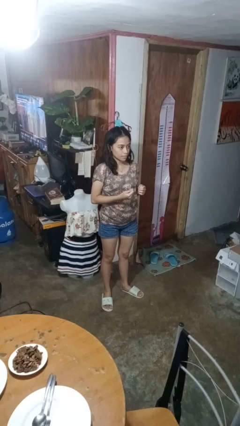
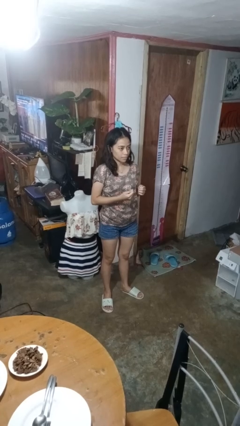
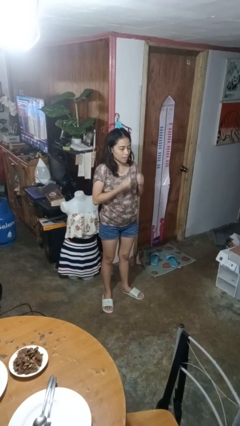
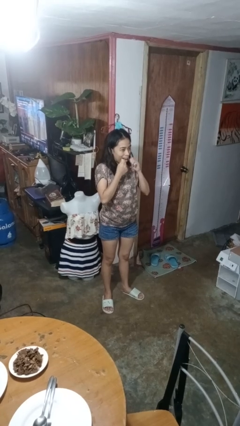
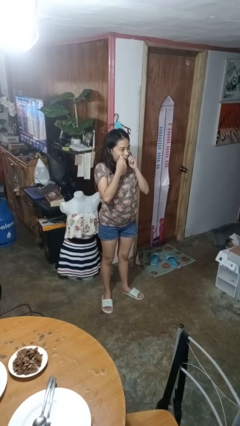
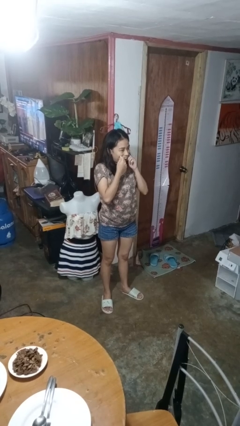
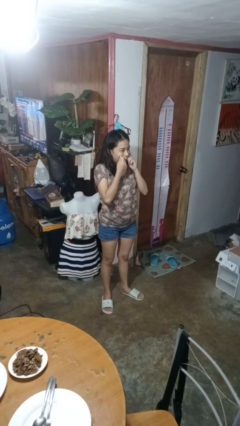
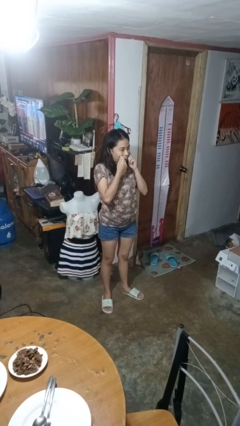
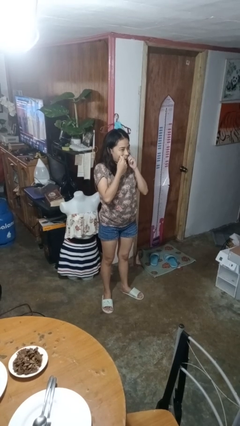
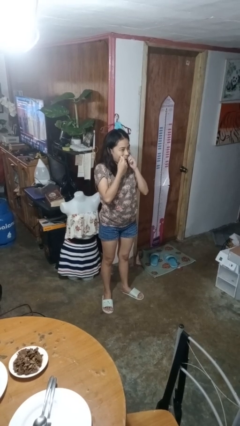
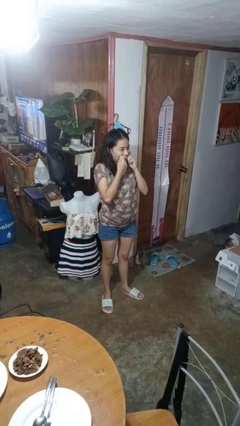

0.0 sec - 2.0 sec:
person flosses

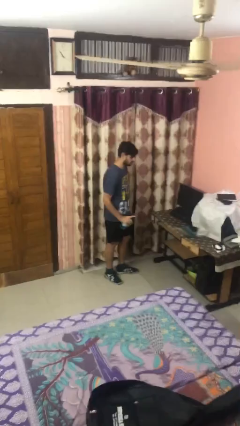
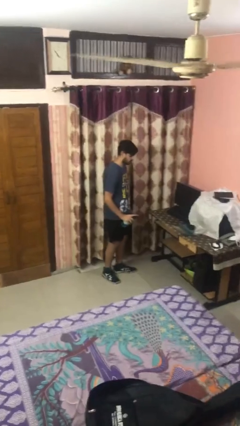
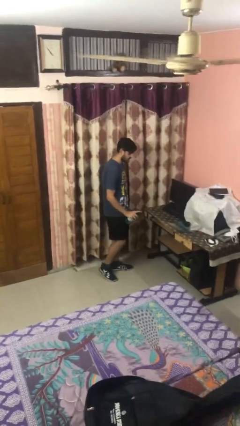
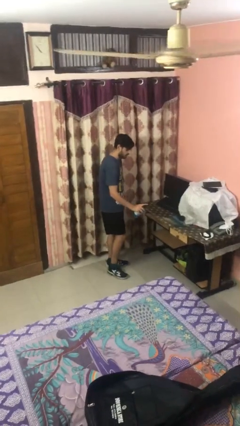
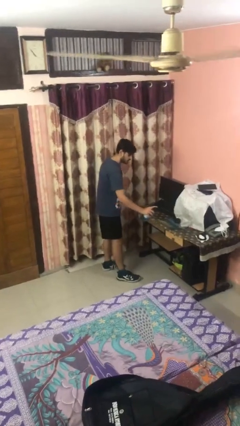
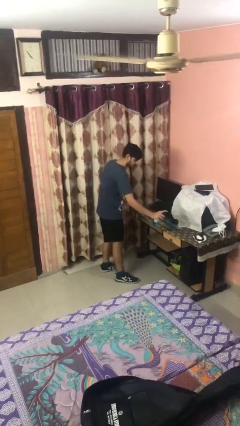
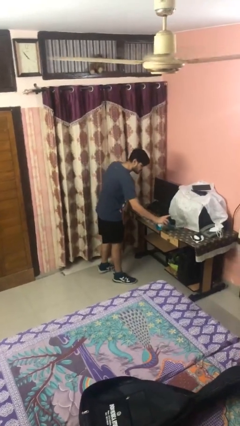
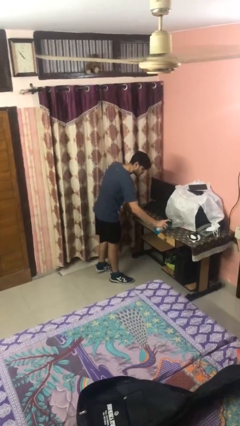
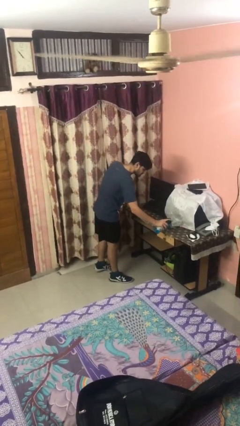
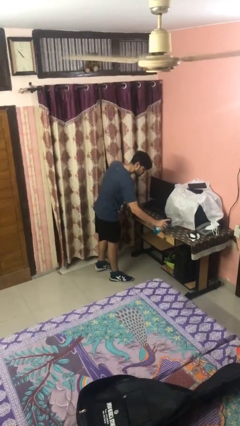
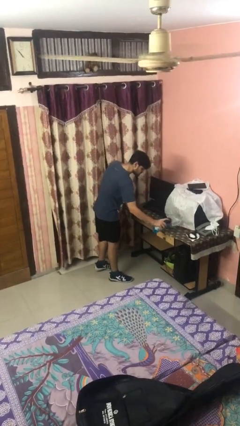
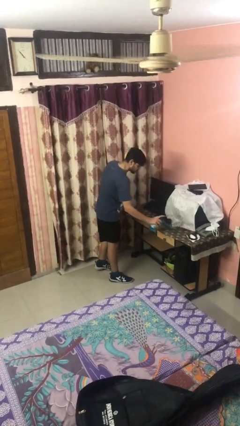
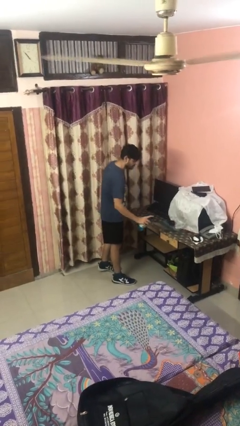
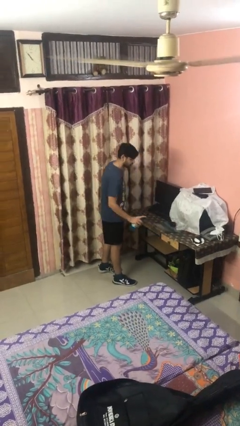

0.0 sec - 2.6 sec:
person sprays from bottle

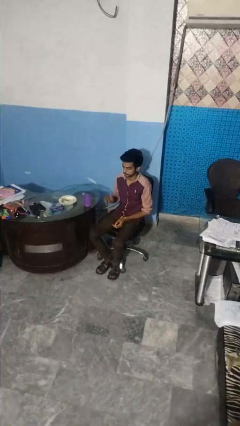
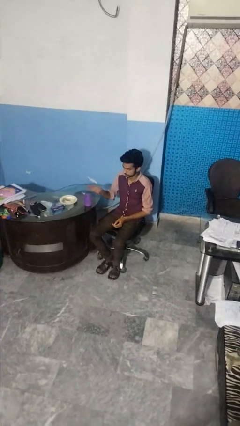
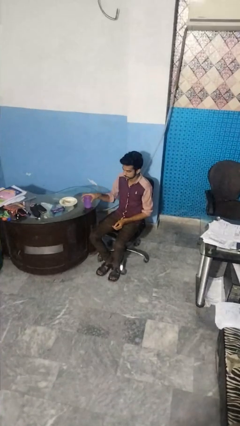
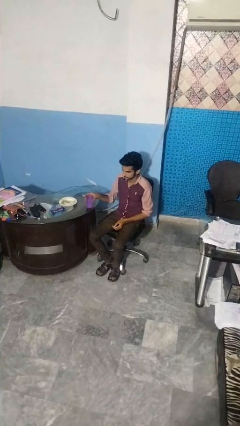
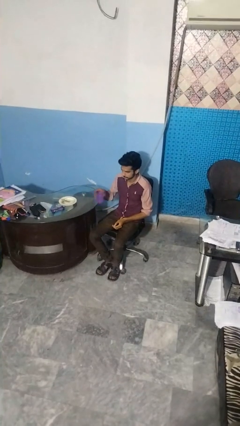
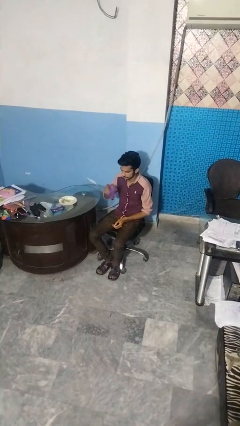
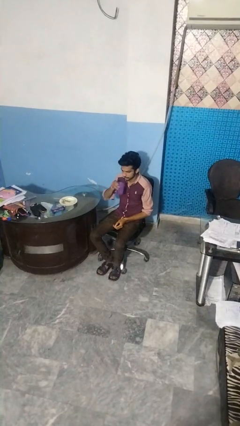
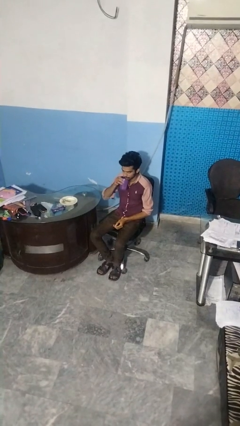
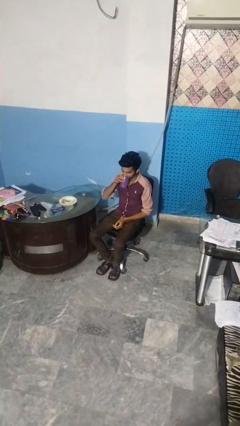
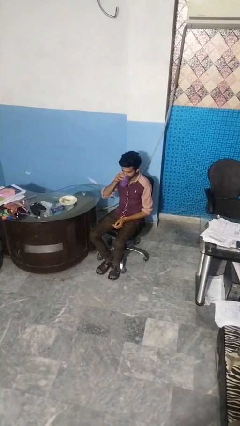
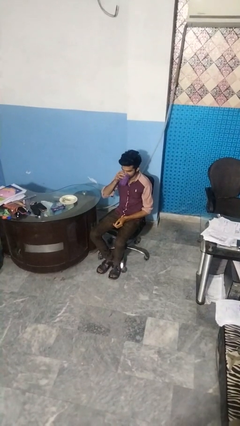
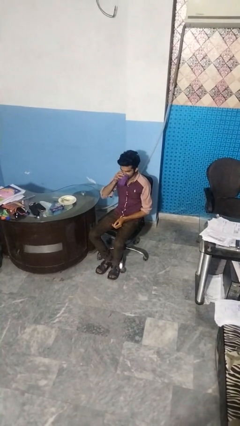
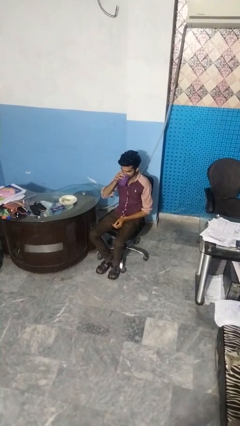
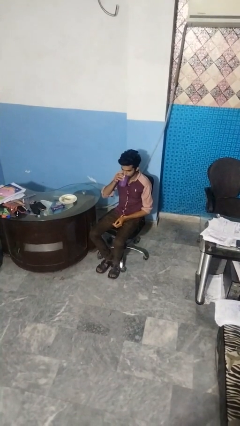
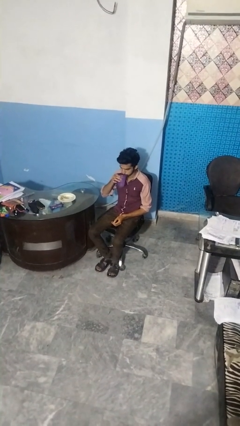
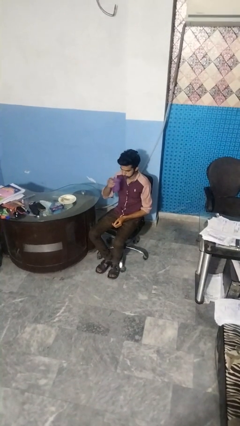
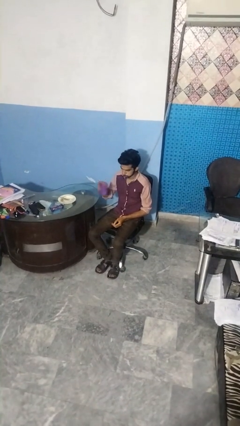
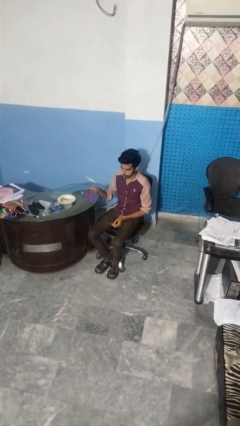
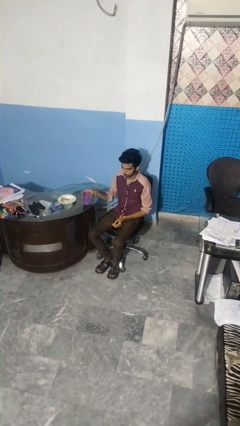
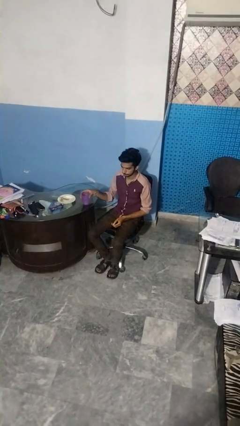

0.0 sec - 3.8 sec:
person drinks from cup

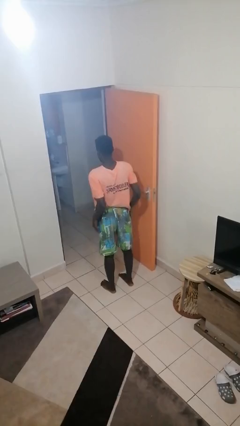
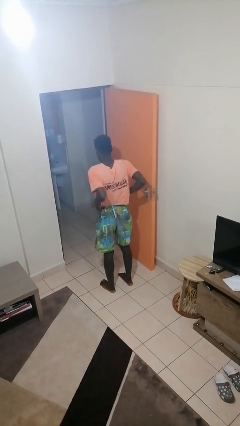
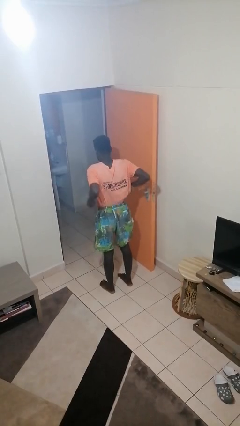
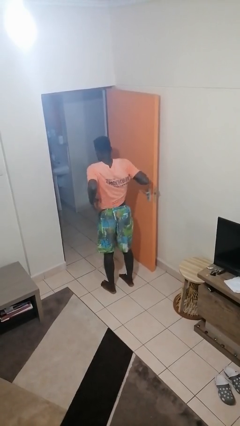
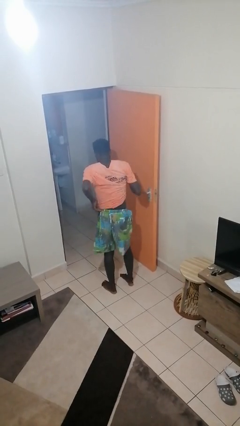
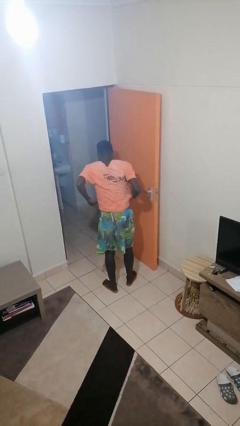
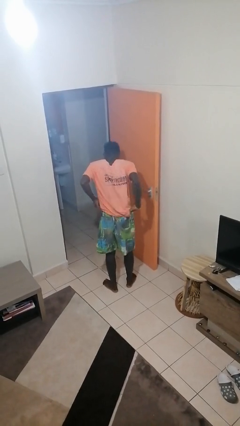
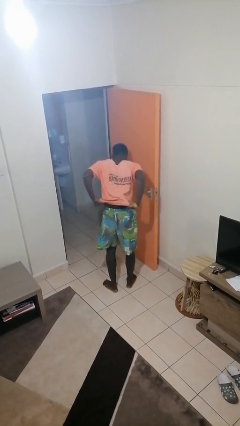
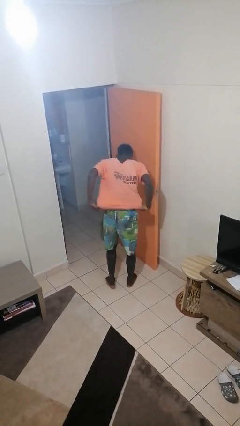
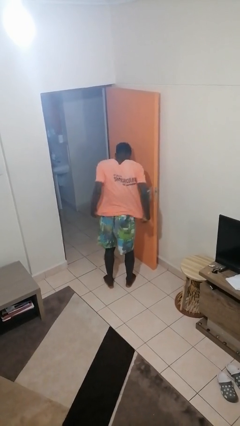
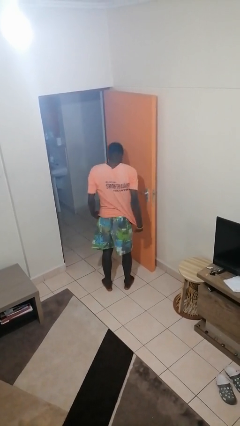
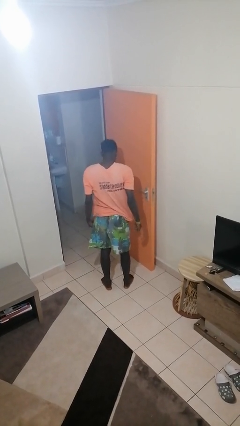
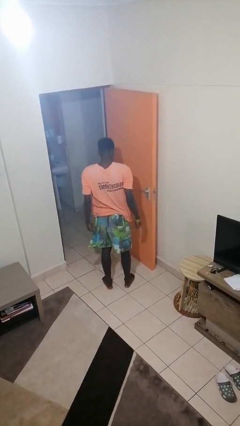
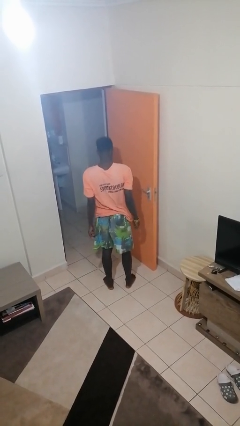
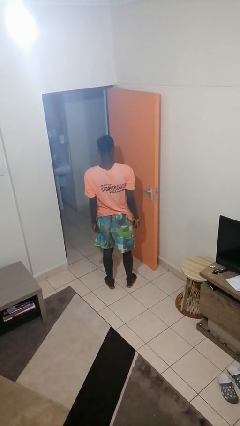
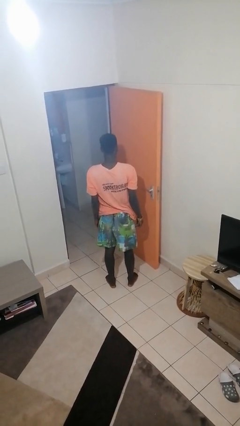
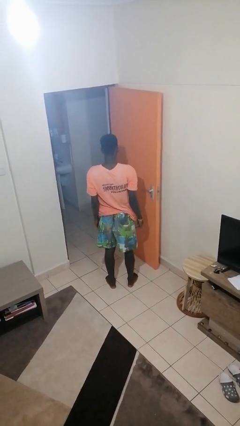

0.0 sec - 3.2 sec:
person untucks shirt

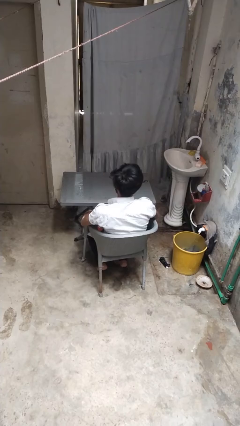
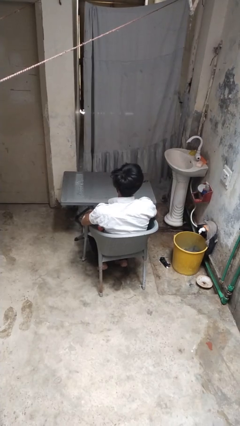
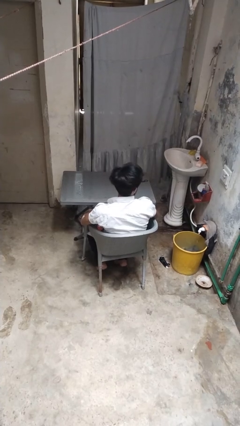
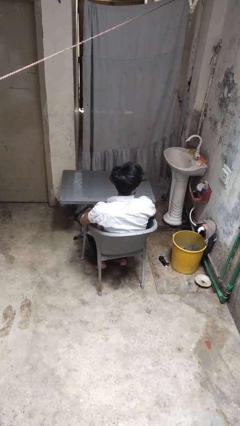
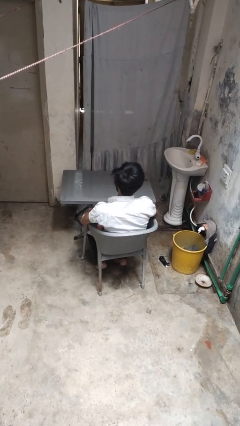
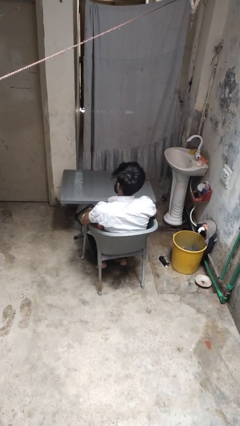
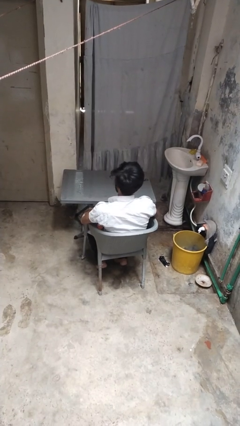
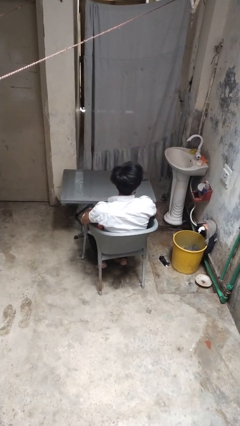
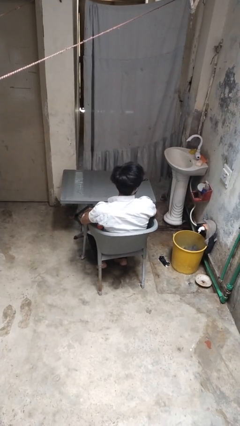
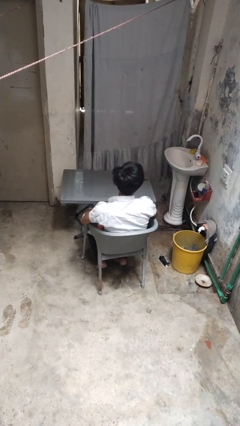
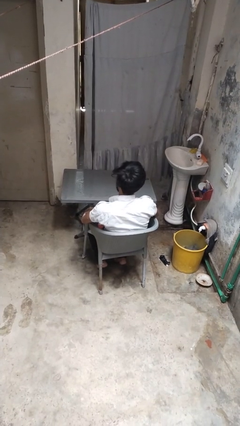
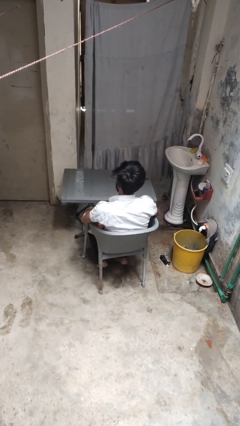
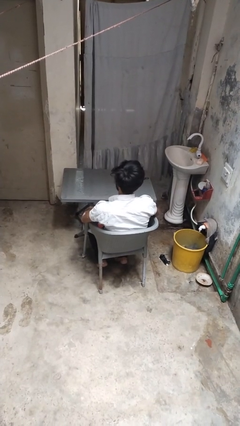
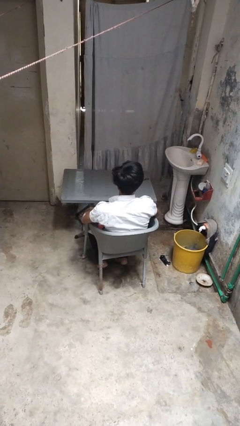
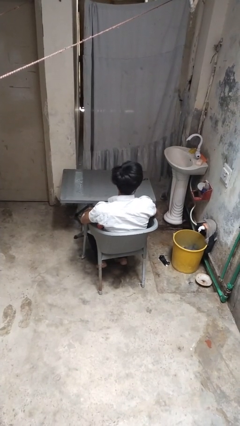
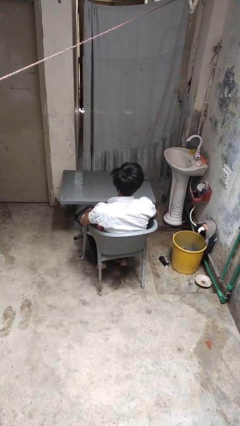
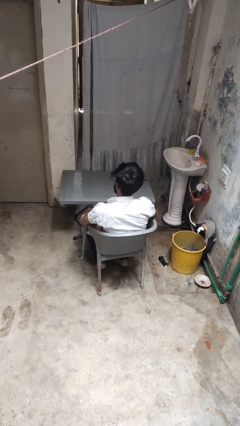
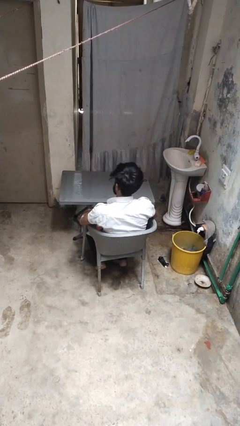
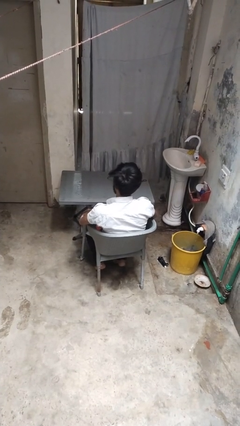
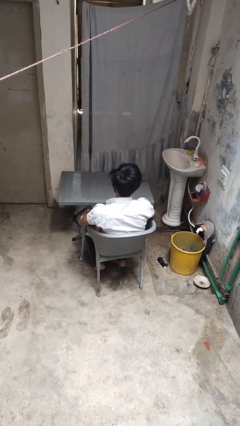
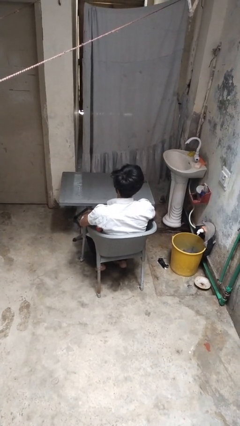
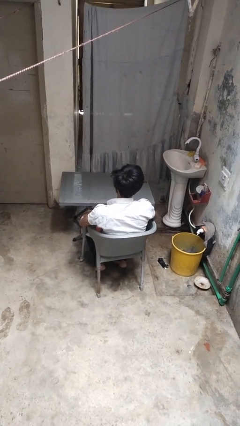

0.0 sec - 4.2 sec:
person shakes head

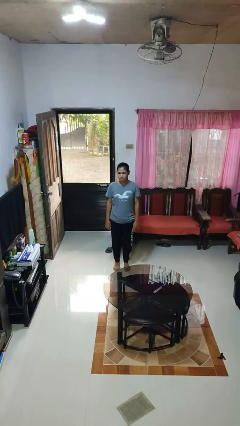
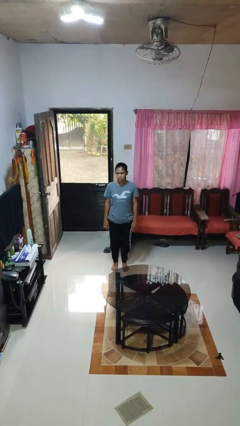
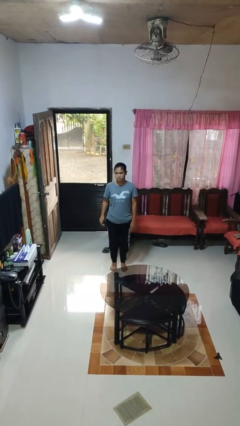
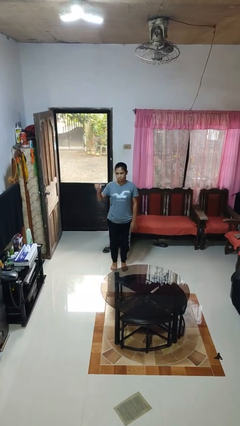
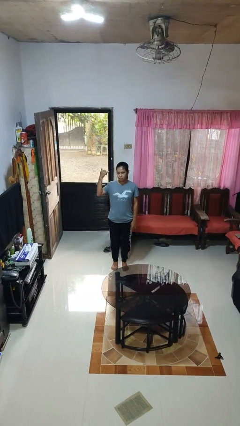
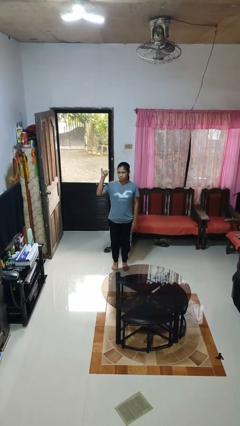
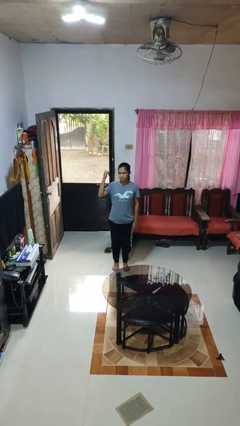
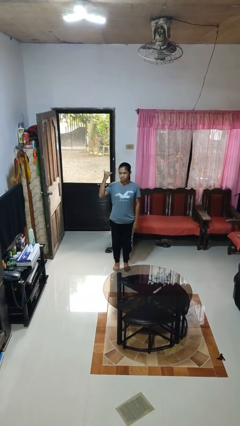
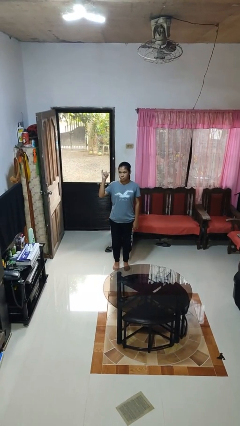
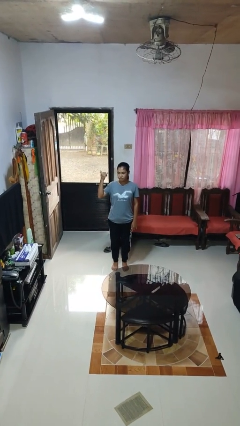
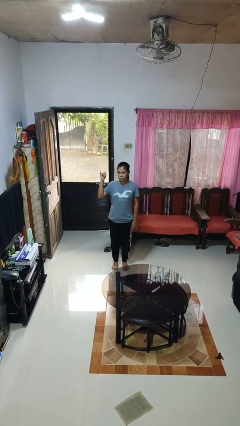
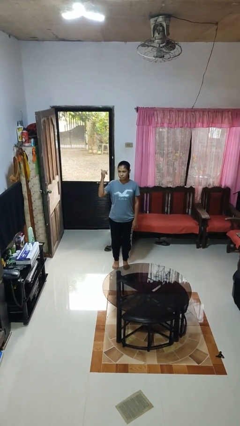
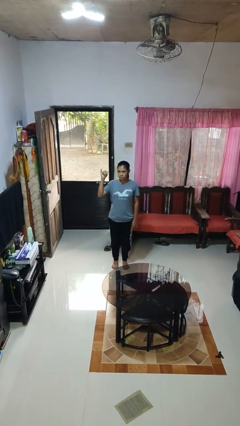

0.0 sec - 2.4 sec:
person gestures hang loose
